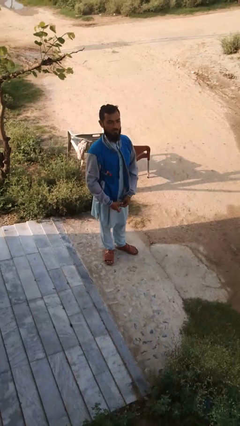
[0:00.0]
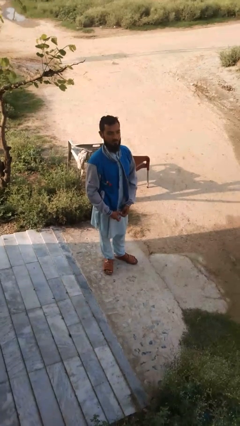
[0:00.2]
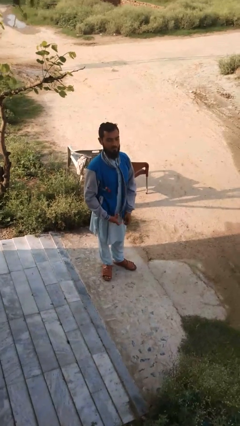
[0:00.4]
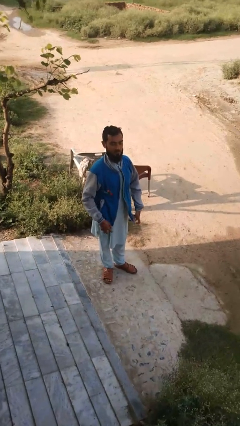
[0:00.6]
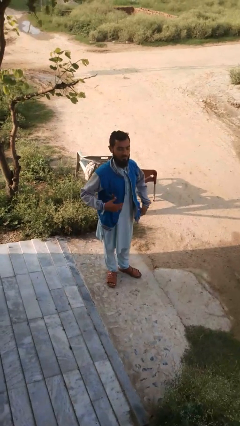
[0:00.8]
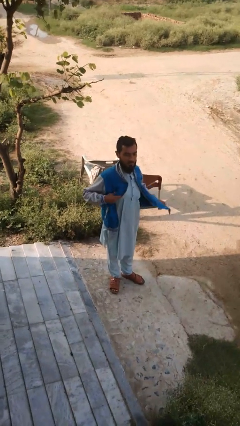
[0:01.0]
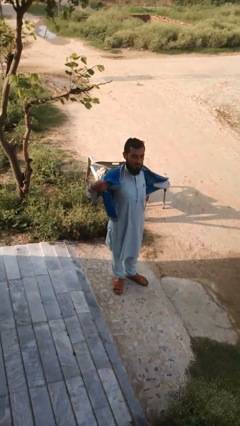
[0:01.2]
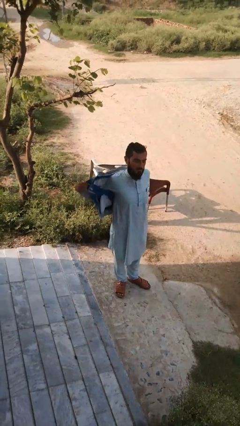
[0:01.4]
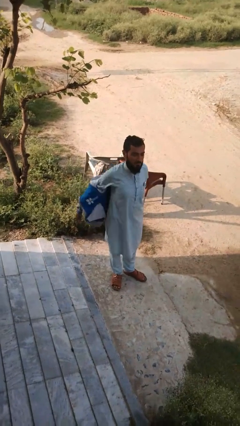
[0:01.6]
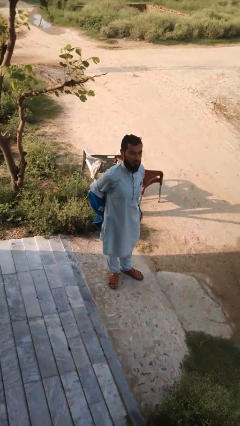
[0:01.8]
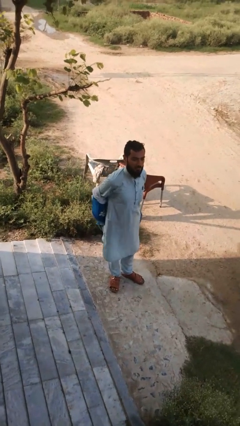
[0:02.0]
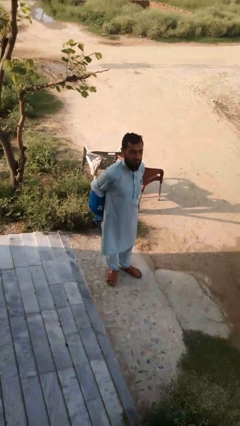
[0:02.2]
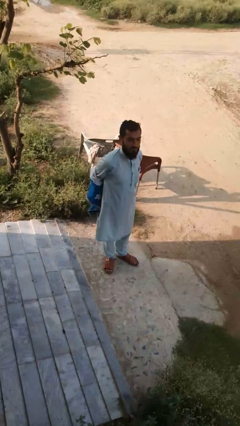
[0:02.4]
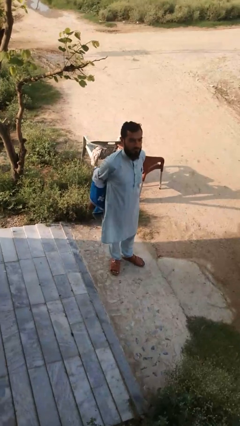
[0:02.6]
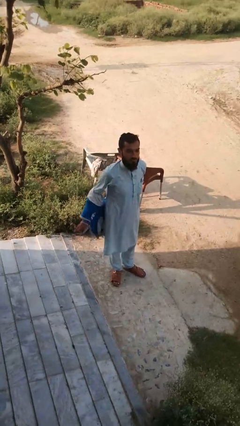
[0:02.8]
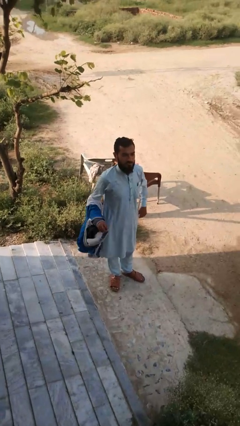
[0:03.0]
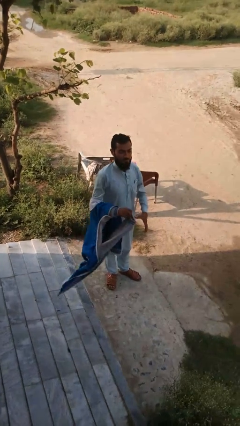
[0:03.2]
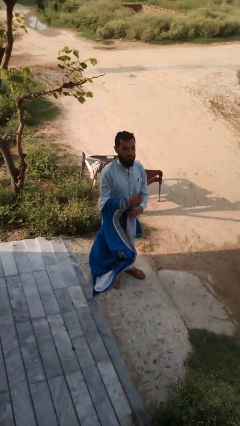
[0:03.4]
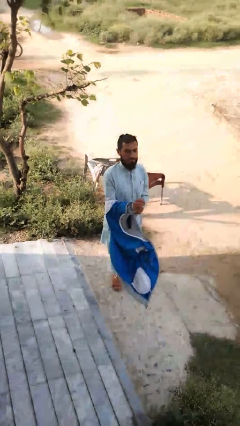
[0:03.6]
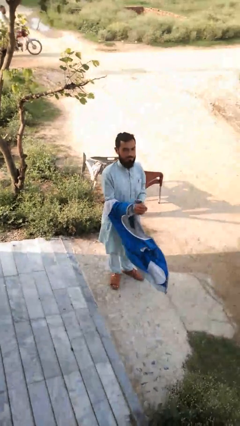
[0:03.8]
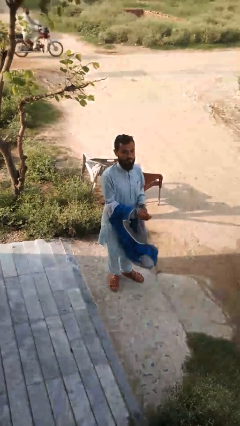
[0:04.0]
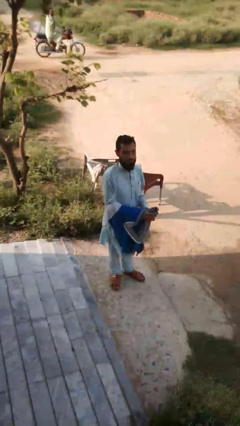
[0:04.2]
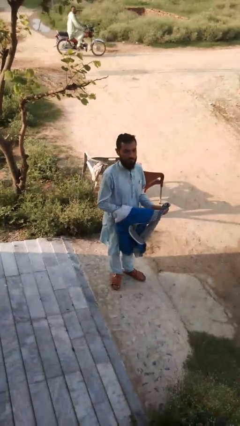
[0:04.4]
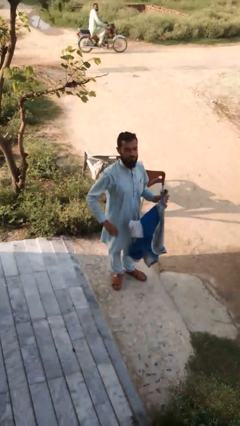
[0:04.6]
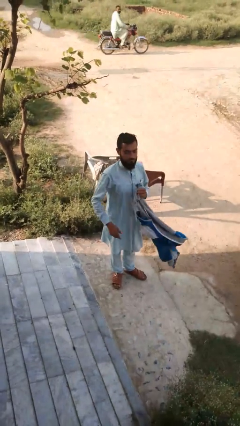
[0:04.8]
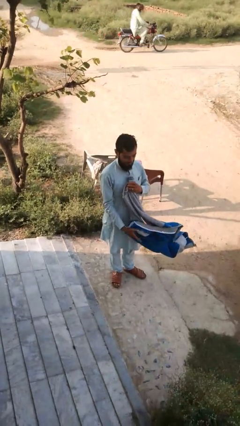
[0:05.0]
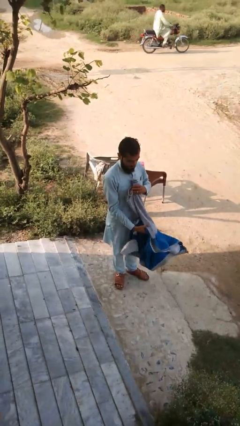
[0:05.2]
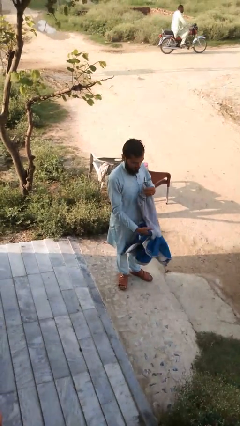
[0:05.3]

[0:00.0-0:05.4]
person takes off jacket

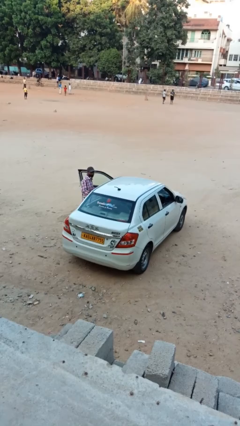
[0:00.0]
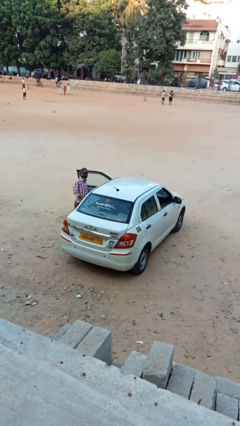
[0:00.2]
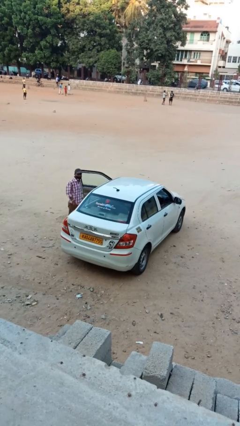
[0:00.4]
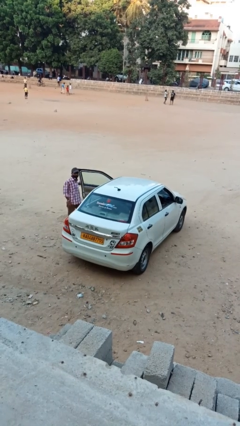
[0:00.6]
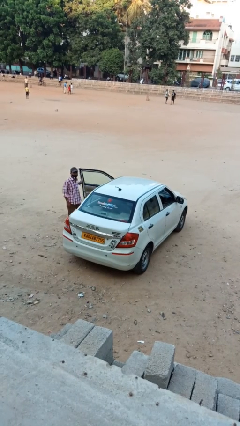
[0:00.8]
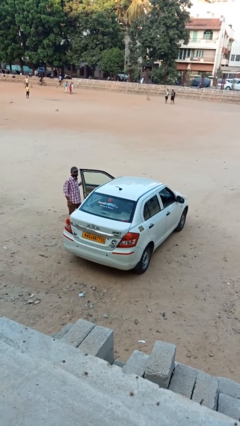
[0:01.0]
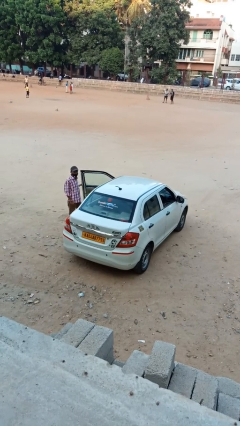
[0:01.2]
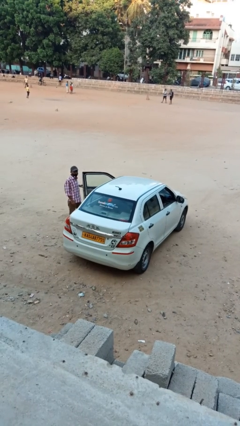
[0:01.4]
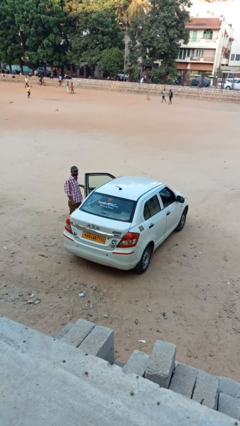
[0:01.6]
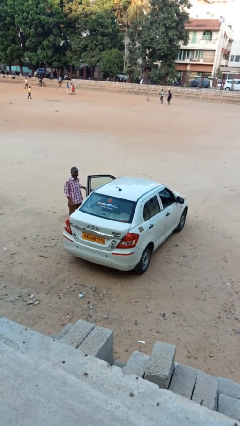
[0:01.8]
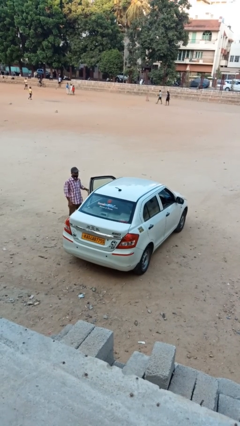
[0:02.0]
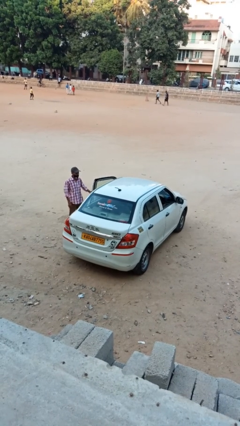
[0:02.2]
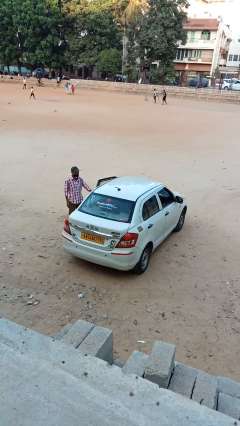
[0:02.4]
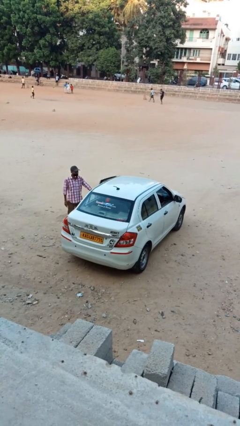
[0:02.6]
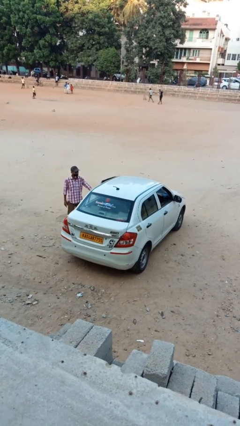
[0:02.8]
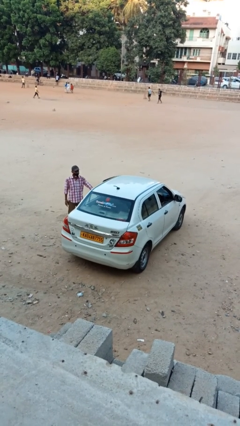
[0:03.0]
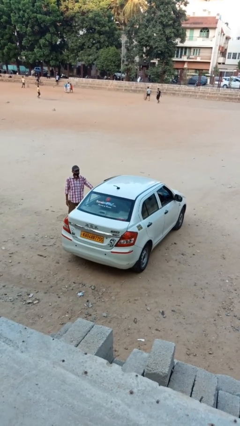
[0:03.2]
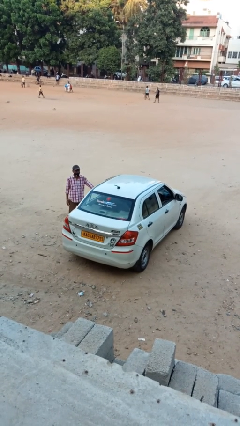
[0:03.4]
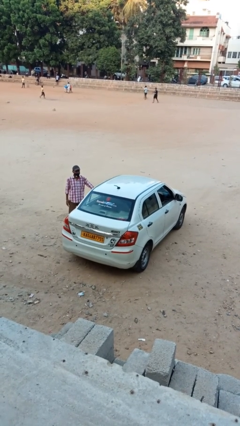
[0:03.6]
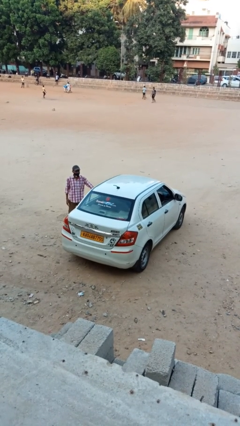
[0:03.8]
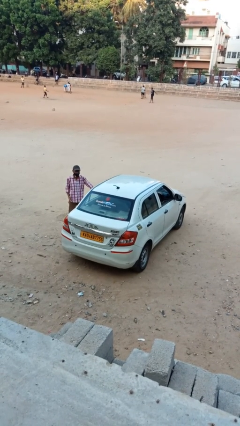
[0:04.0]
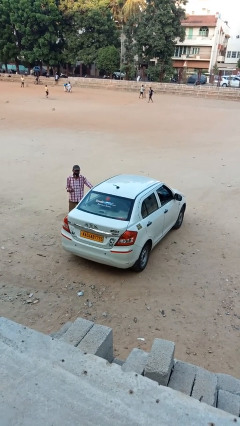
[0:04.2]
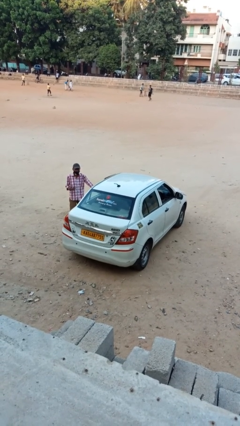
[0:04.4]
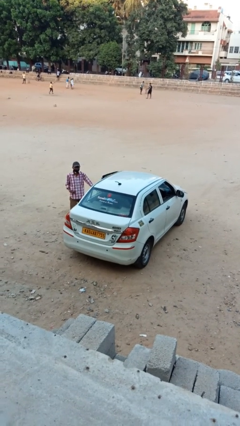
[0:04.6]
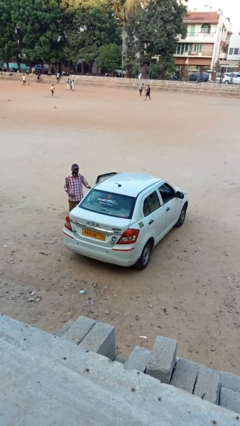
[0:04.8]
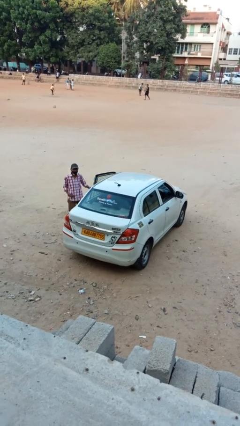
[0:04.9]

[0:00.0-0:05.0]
car drops off person

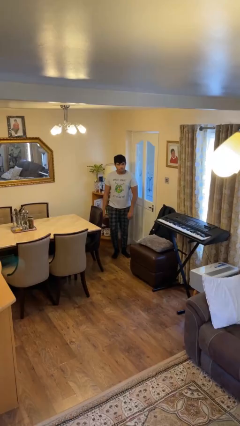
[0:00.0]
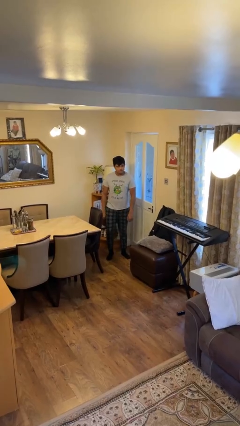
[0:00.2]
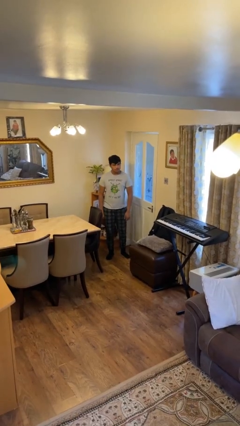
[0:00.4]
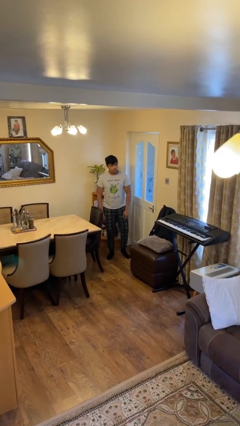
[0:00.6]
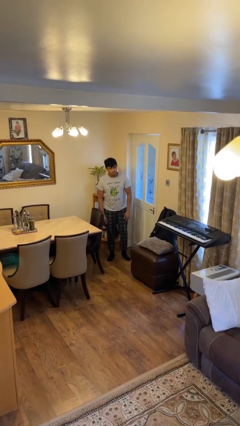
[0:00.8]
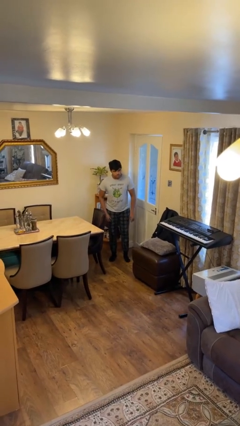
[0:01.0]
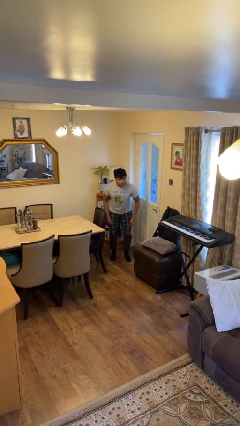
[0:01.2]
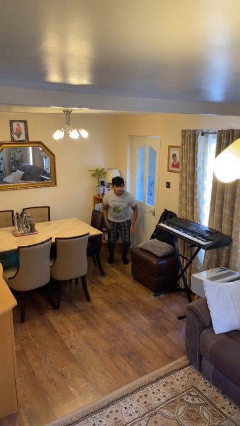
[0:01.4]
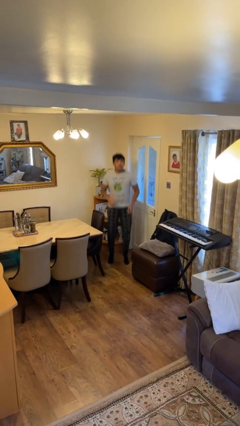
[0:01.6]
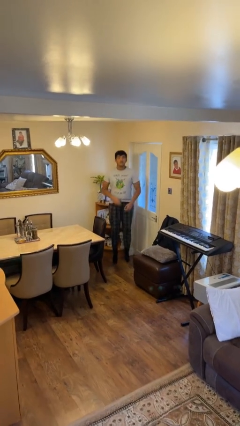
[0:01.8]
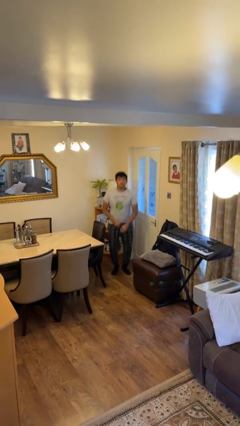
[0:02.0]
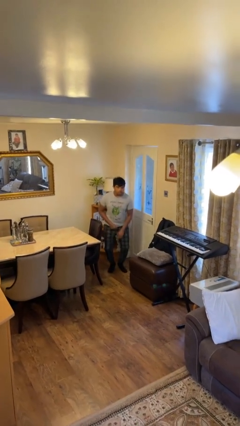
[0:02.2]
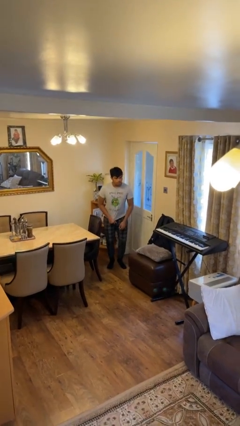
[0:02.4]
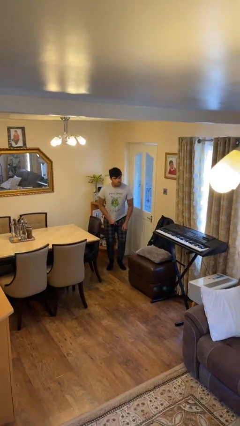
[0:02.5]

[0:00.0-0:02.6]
person jumps

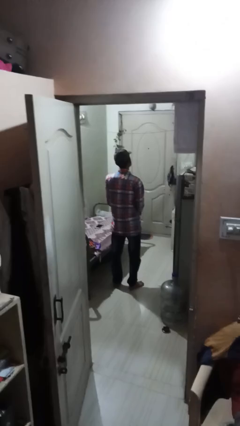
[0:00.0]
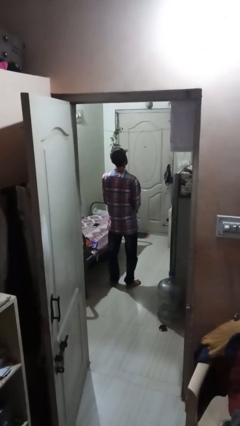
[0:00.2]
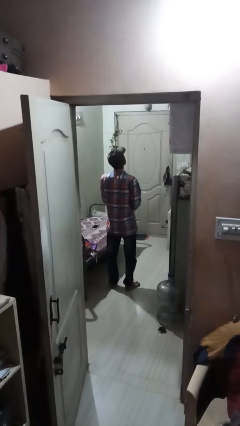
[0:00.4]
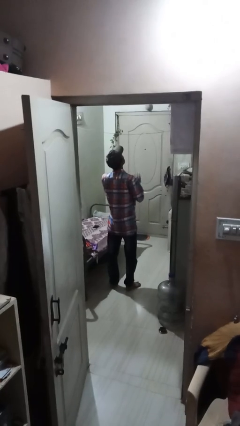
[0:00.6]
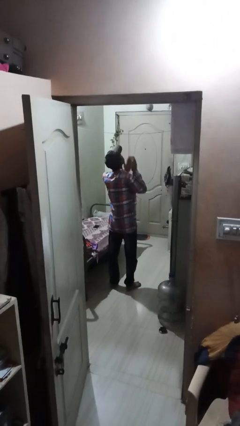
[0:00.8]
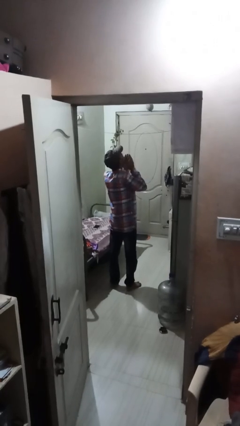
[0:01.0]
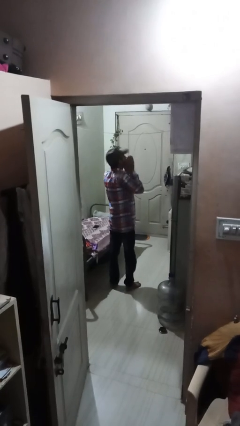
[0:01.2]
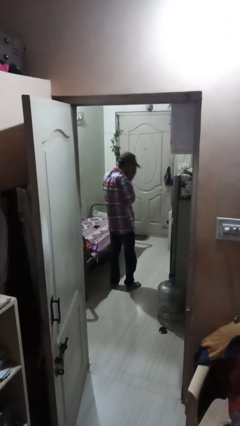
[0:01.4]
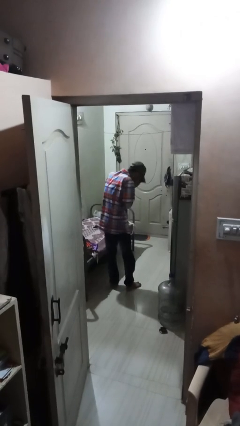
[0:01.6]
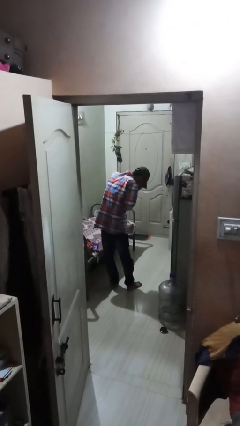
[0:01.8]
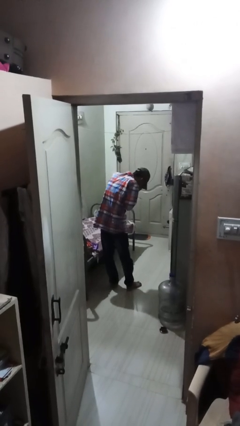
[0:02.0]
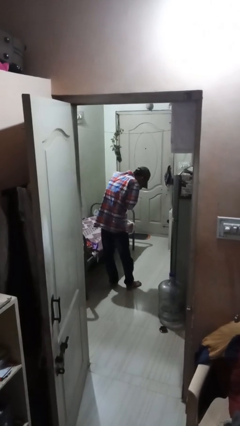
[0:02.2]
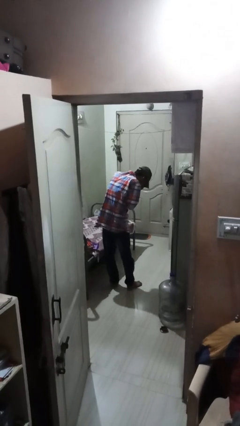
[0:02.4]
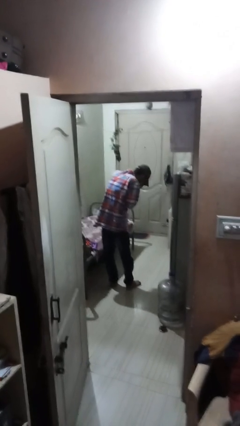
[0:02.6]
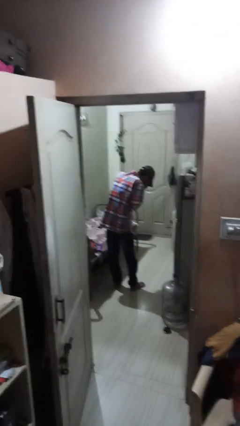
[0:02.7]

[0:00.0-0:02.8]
person sneezes into hand

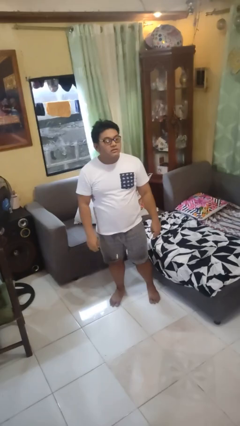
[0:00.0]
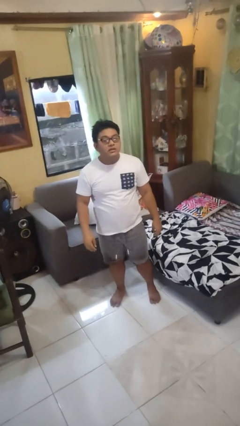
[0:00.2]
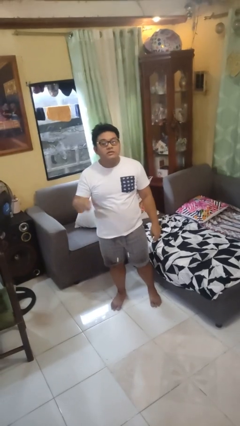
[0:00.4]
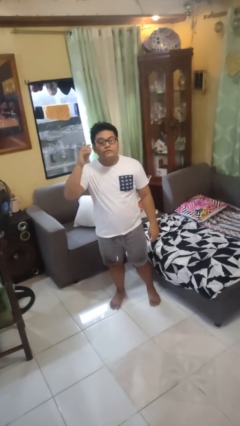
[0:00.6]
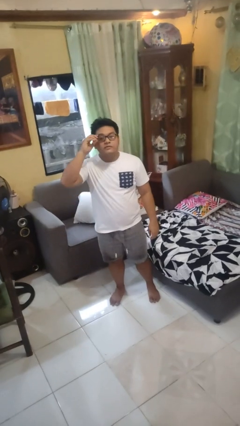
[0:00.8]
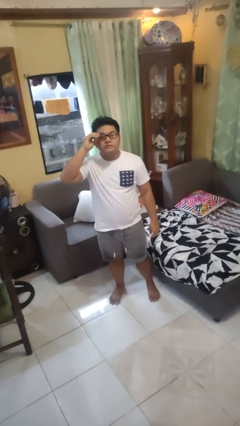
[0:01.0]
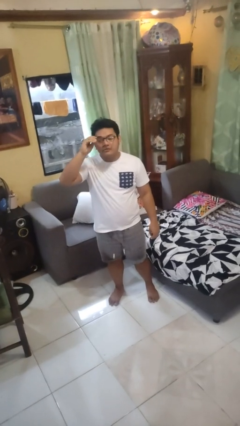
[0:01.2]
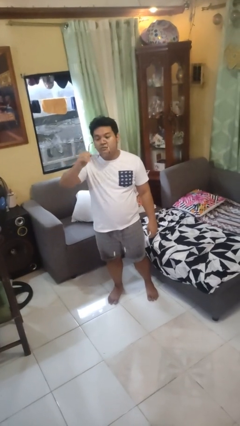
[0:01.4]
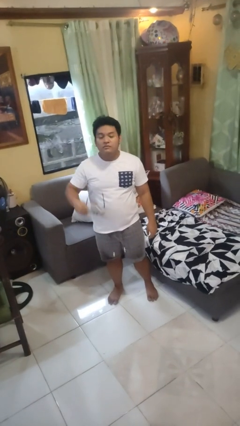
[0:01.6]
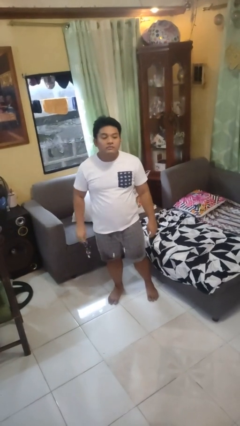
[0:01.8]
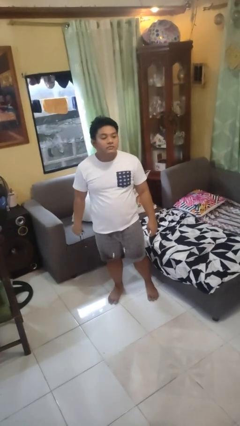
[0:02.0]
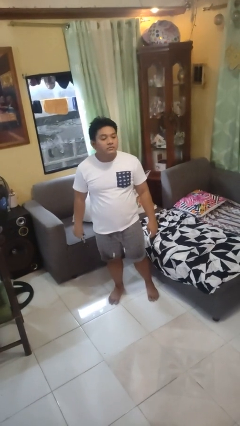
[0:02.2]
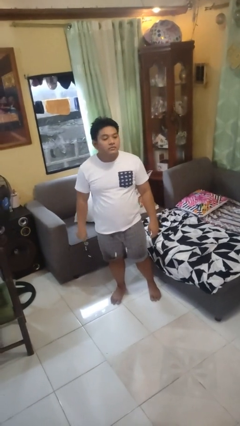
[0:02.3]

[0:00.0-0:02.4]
person takes off glasses
